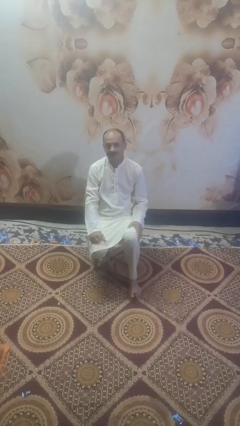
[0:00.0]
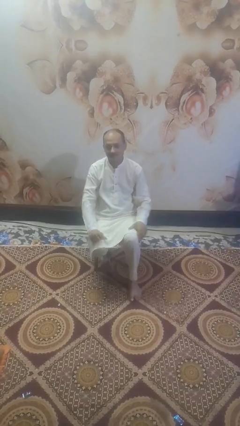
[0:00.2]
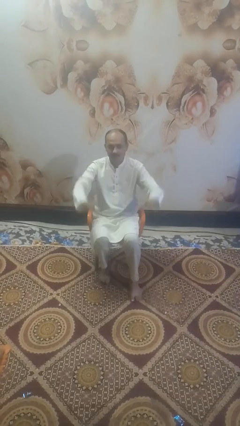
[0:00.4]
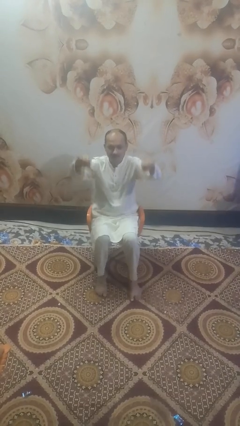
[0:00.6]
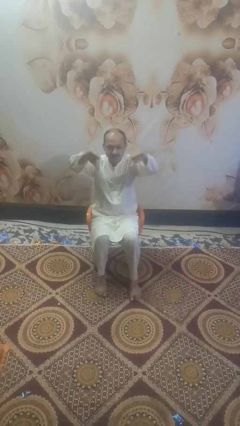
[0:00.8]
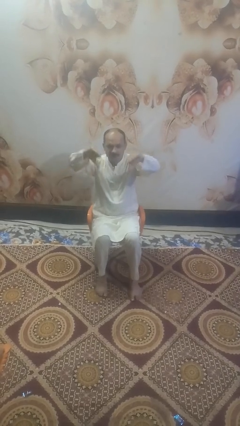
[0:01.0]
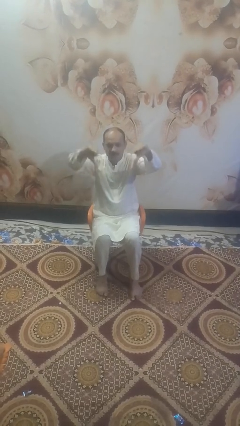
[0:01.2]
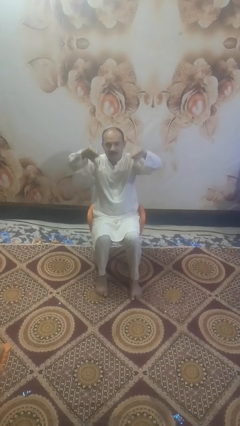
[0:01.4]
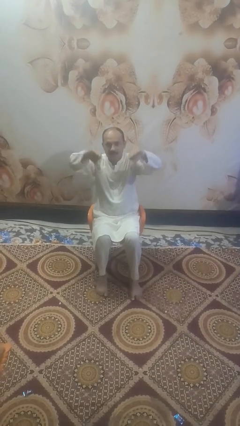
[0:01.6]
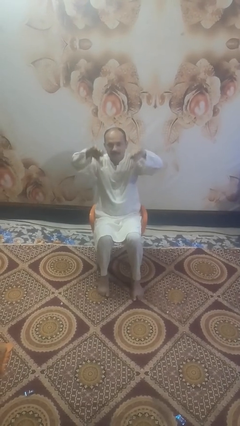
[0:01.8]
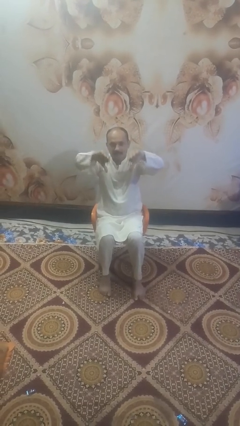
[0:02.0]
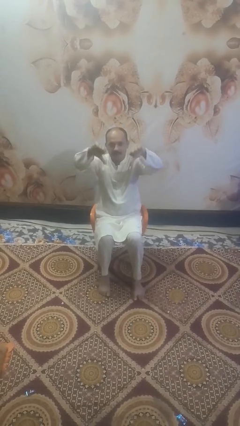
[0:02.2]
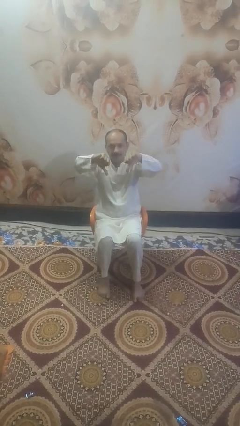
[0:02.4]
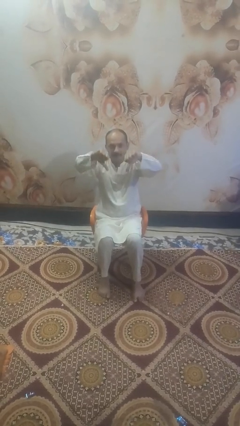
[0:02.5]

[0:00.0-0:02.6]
person gestures thumbs down

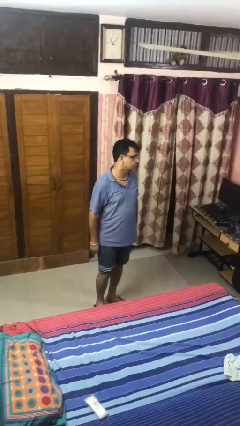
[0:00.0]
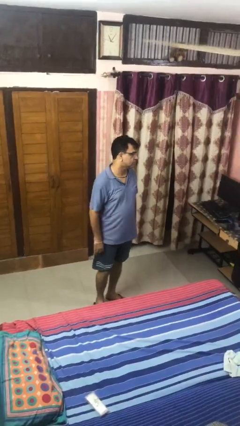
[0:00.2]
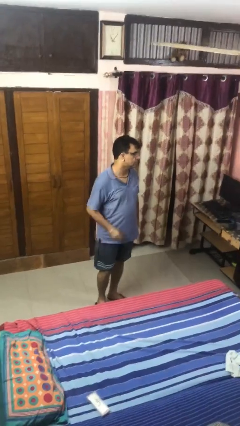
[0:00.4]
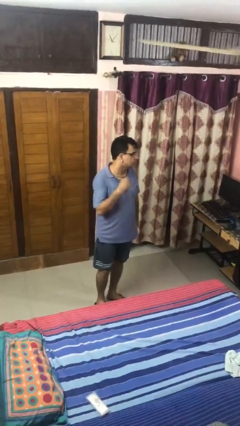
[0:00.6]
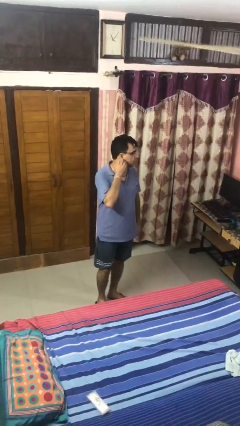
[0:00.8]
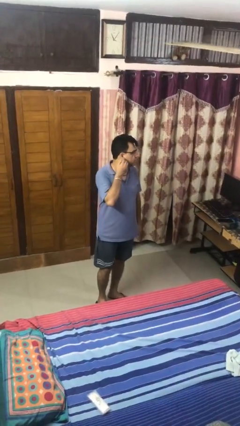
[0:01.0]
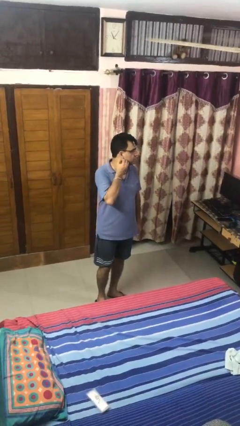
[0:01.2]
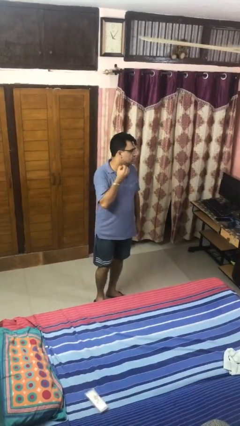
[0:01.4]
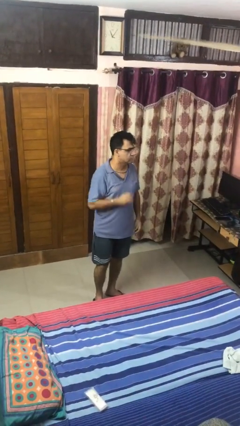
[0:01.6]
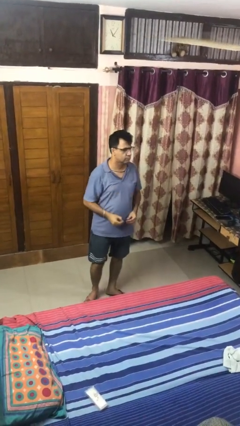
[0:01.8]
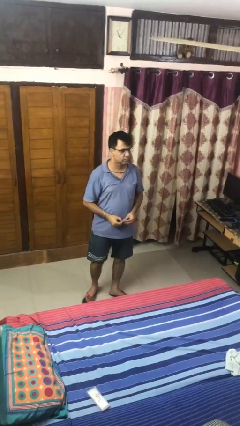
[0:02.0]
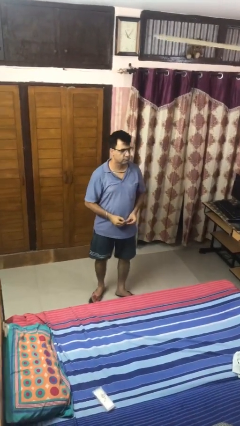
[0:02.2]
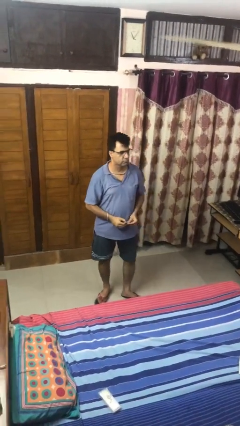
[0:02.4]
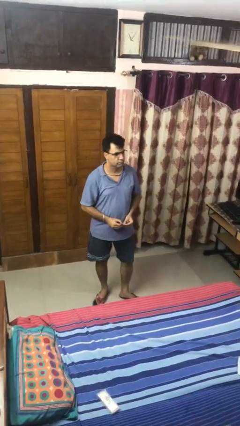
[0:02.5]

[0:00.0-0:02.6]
person takes off earrings

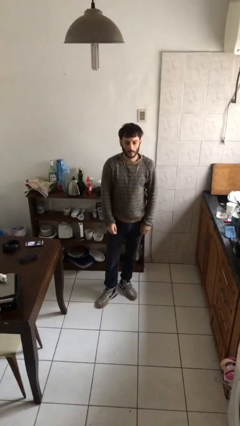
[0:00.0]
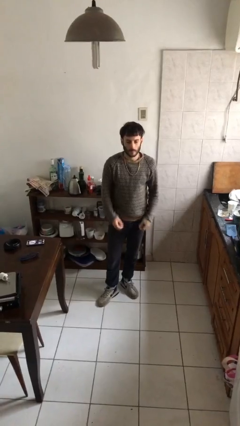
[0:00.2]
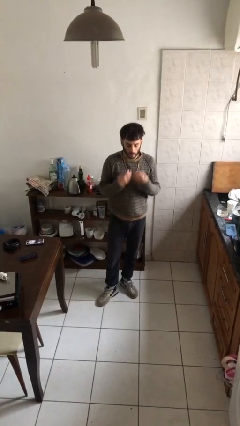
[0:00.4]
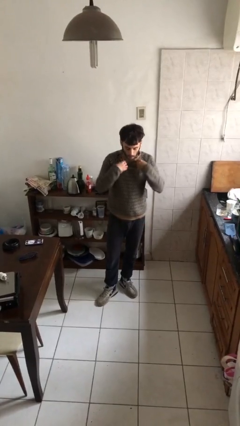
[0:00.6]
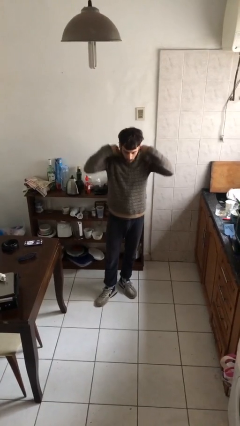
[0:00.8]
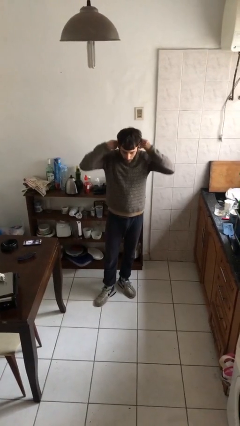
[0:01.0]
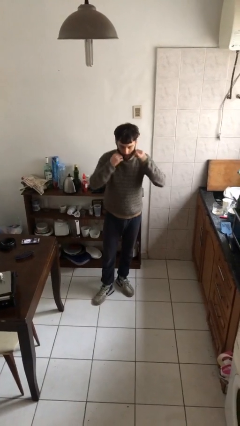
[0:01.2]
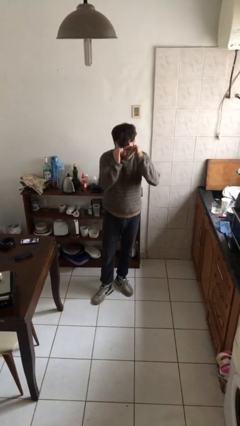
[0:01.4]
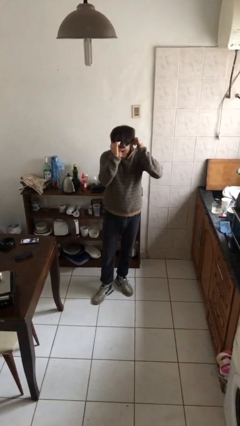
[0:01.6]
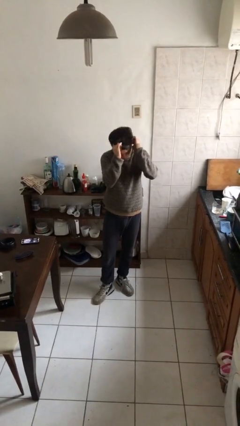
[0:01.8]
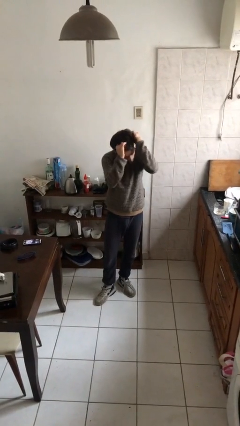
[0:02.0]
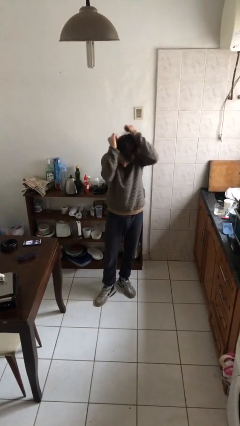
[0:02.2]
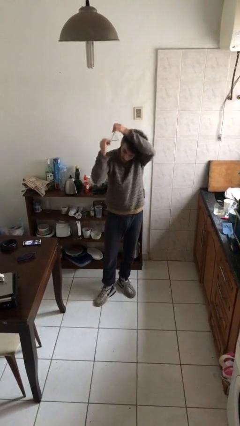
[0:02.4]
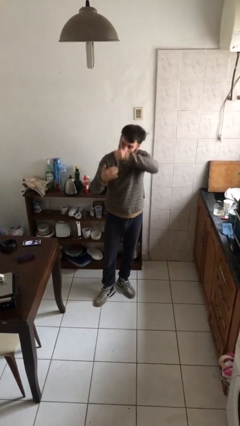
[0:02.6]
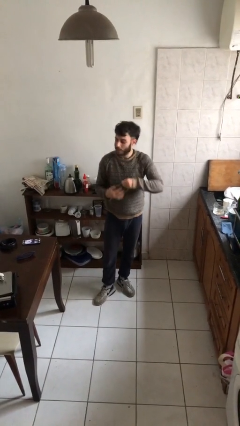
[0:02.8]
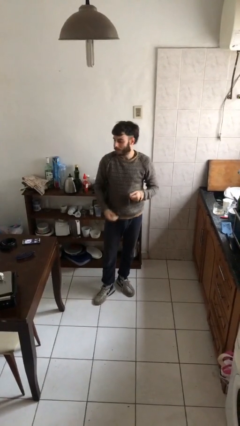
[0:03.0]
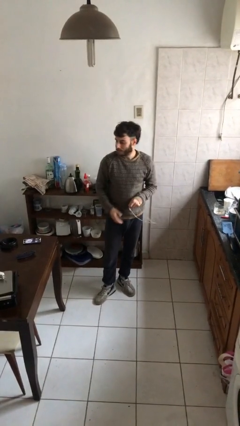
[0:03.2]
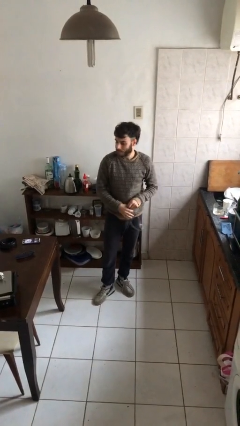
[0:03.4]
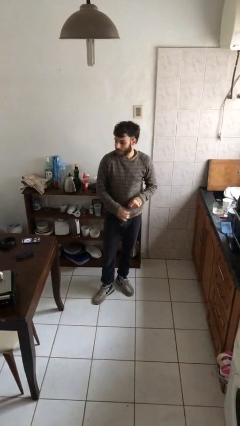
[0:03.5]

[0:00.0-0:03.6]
person takes off necklace

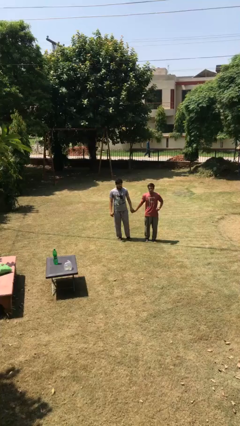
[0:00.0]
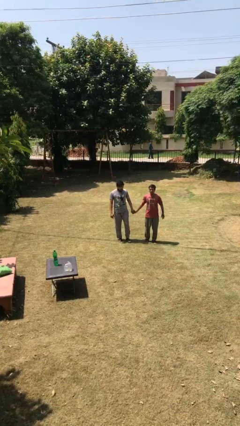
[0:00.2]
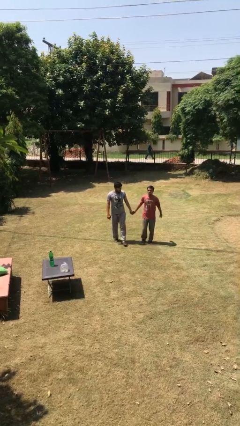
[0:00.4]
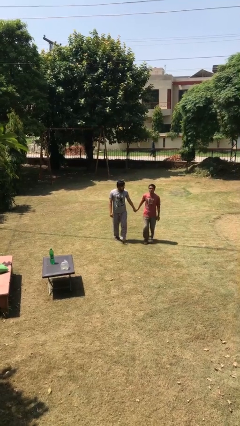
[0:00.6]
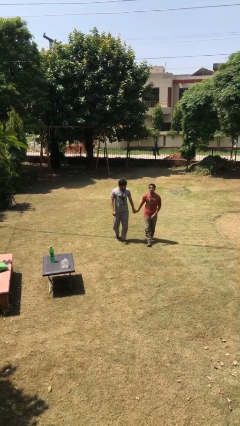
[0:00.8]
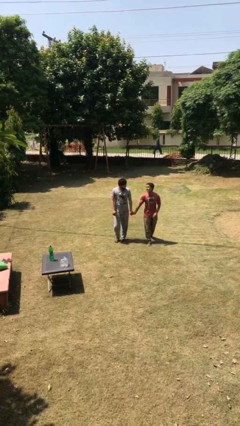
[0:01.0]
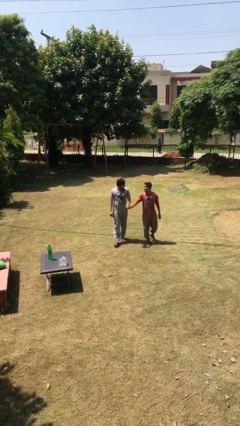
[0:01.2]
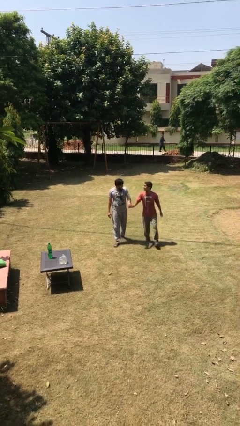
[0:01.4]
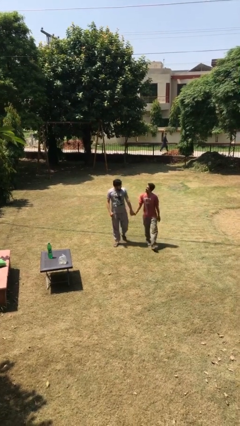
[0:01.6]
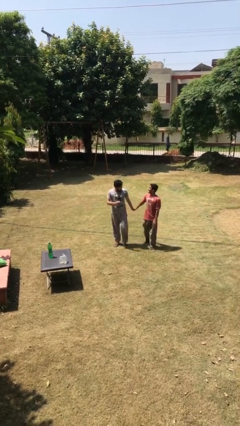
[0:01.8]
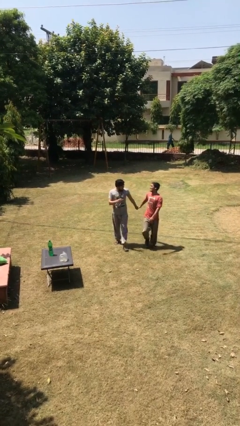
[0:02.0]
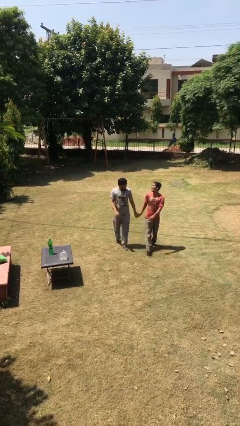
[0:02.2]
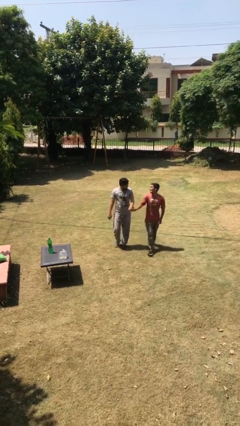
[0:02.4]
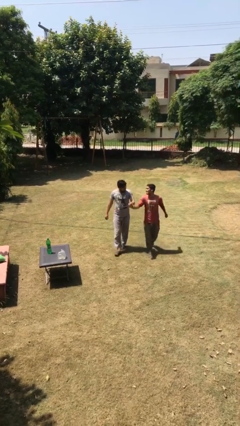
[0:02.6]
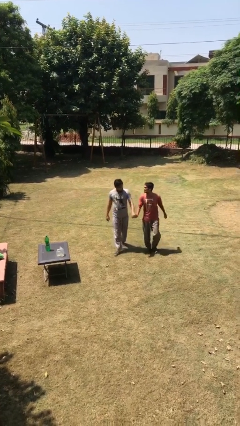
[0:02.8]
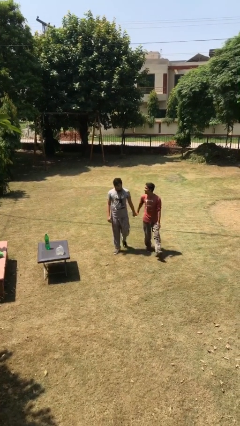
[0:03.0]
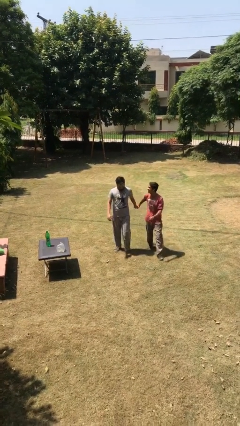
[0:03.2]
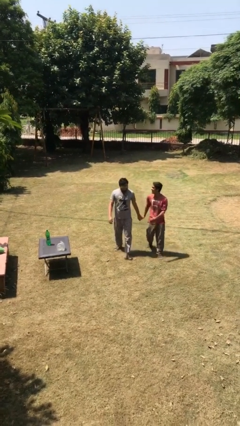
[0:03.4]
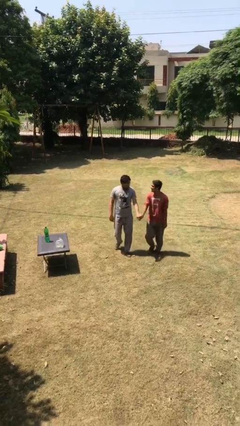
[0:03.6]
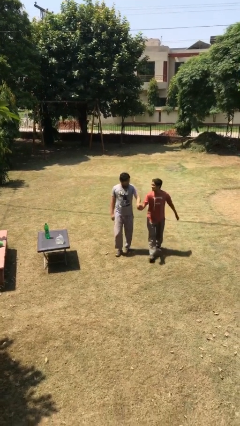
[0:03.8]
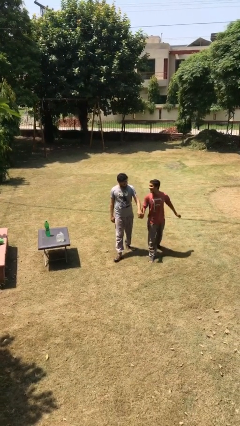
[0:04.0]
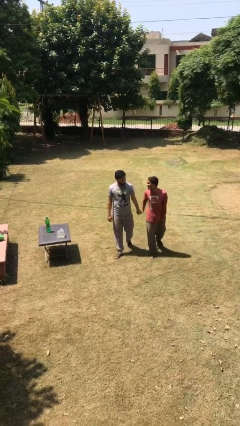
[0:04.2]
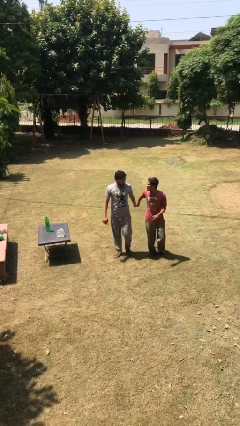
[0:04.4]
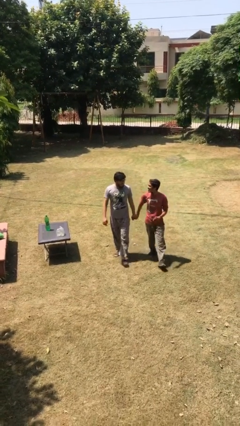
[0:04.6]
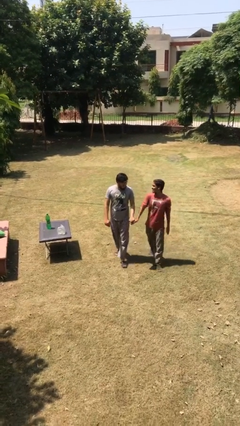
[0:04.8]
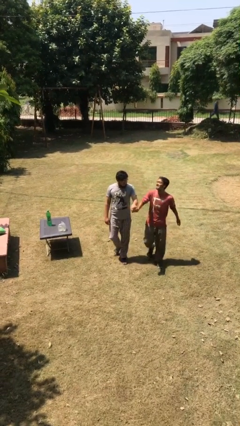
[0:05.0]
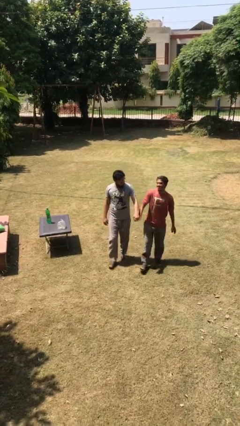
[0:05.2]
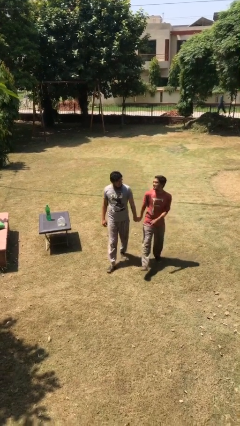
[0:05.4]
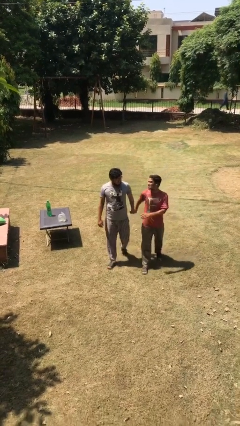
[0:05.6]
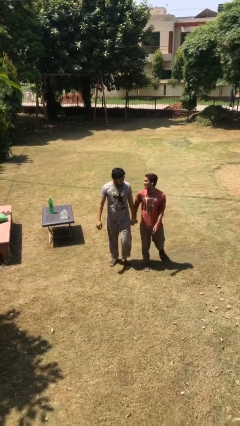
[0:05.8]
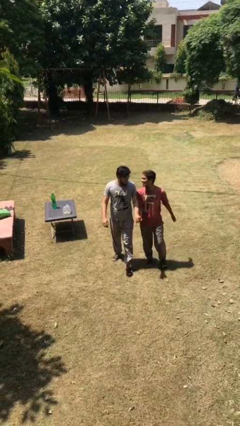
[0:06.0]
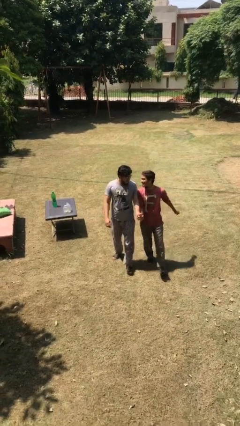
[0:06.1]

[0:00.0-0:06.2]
person holds hand

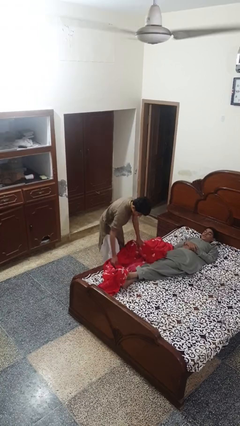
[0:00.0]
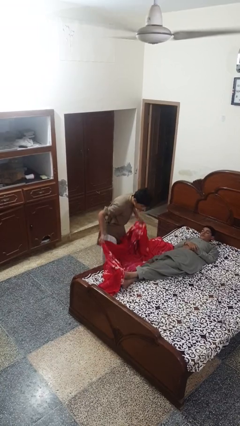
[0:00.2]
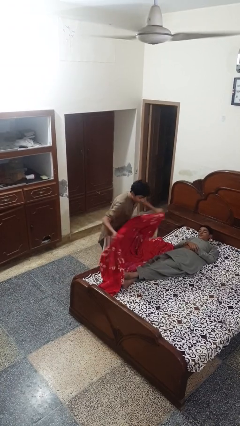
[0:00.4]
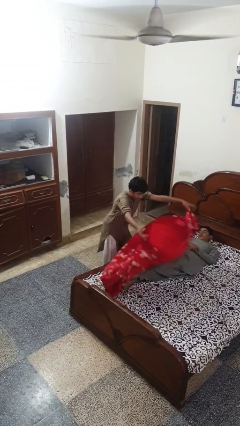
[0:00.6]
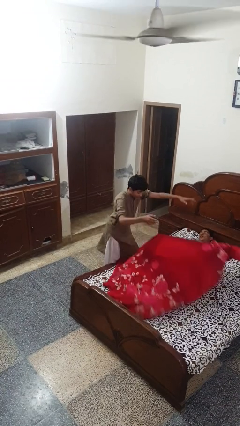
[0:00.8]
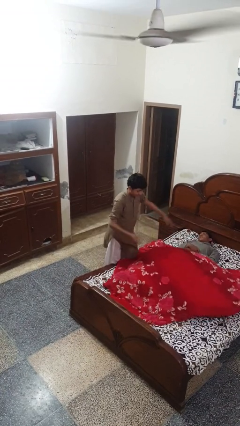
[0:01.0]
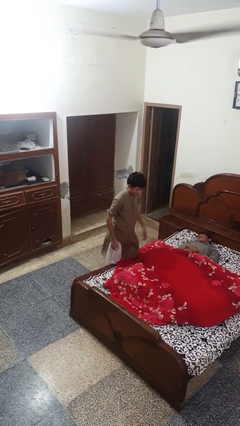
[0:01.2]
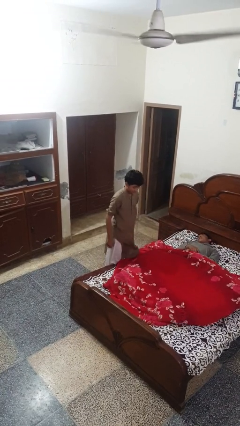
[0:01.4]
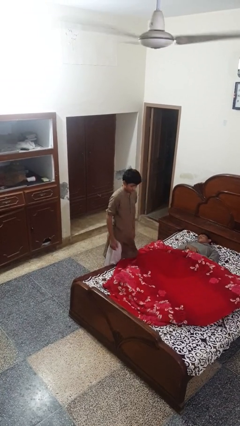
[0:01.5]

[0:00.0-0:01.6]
person covers friend with blanket

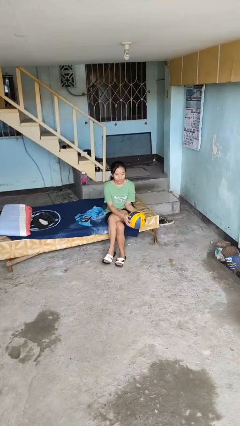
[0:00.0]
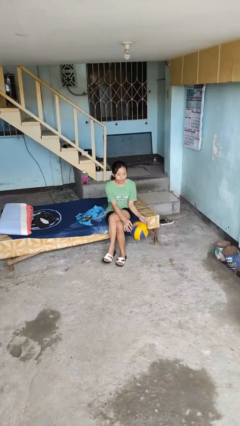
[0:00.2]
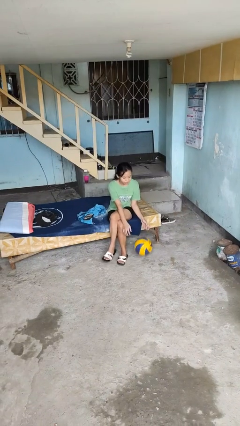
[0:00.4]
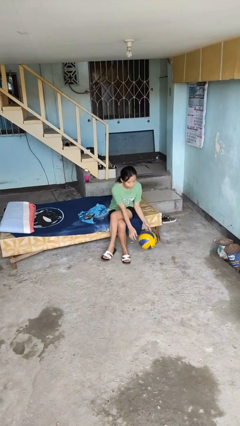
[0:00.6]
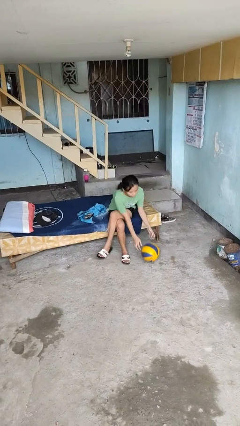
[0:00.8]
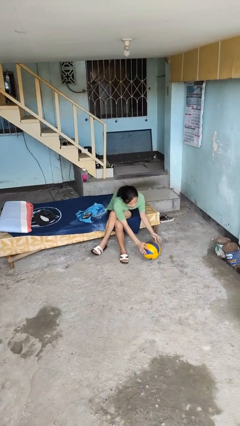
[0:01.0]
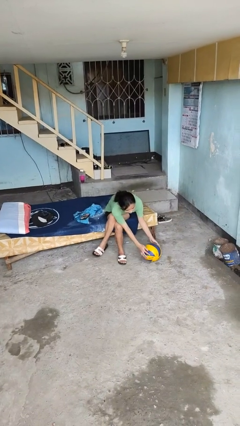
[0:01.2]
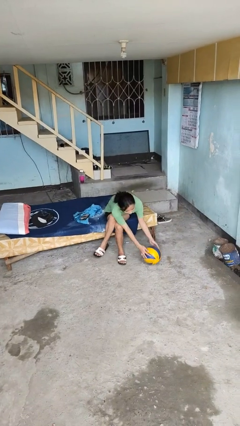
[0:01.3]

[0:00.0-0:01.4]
person drops object
